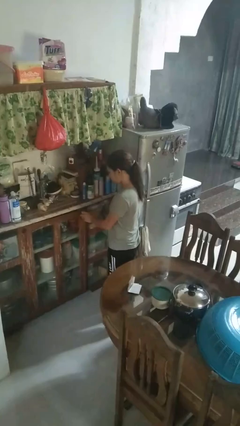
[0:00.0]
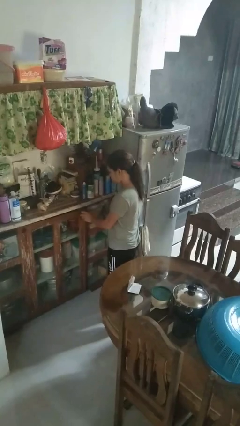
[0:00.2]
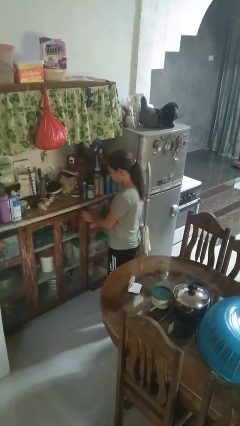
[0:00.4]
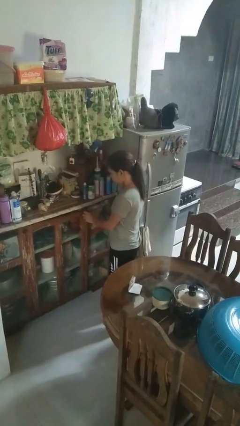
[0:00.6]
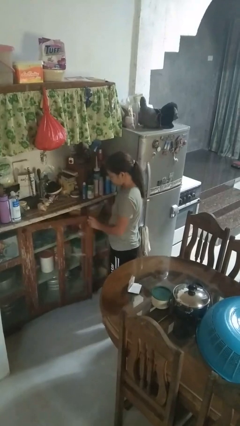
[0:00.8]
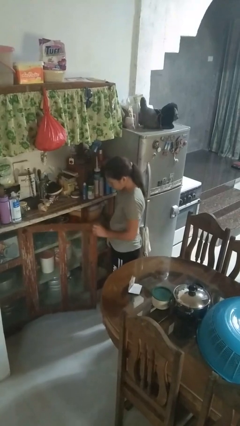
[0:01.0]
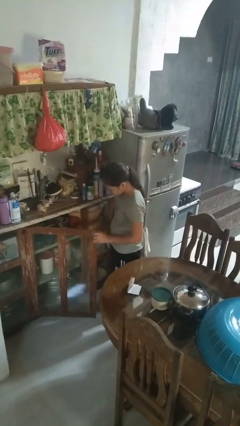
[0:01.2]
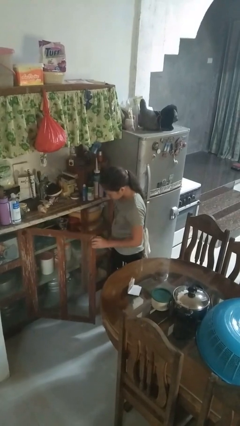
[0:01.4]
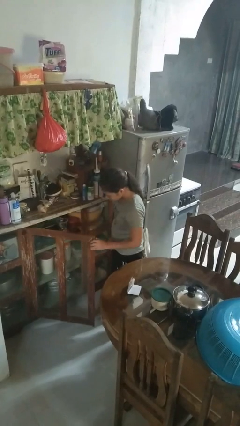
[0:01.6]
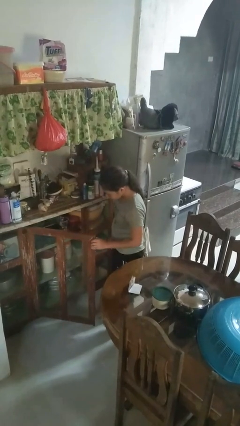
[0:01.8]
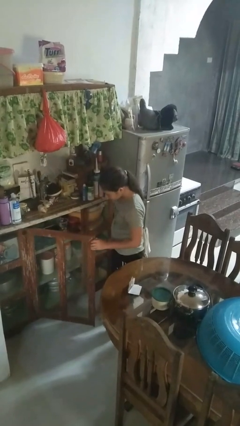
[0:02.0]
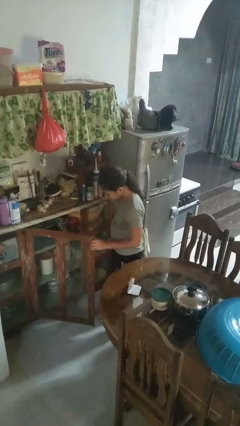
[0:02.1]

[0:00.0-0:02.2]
person opens cabinet

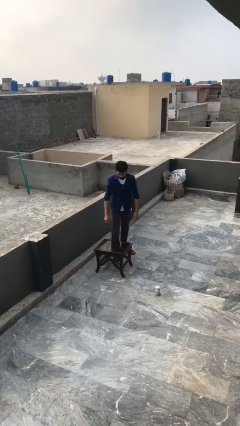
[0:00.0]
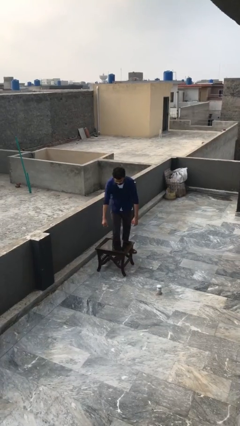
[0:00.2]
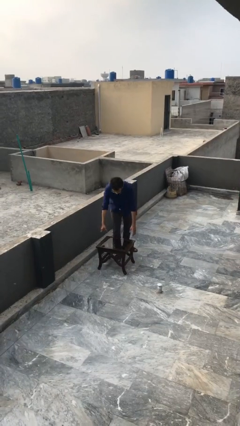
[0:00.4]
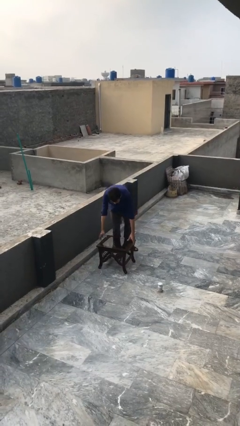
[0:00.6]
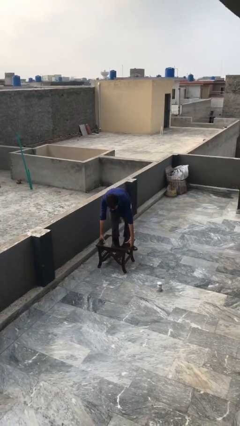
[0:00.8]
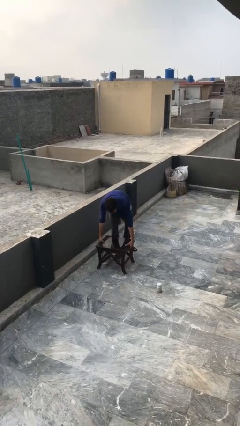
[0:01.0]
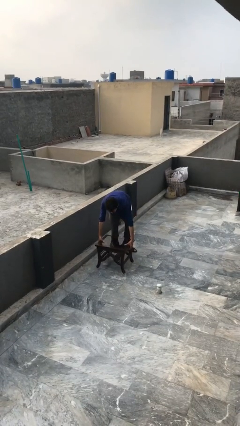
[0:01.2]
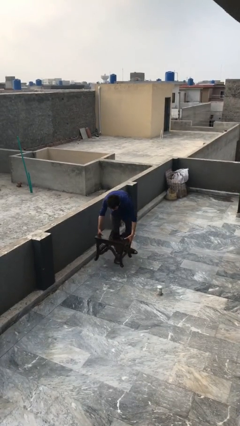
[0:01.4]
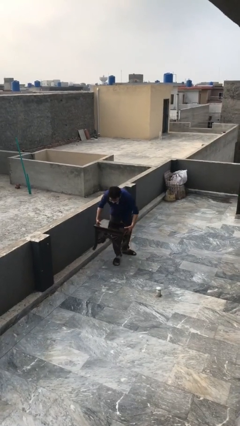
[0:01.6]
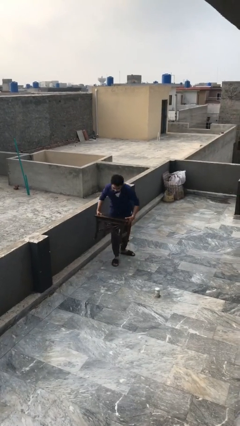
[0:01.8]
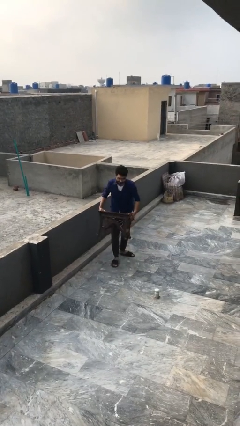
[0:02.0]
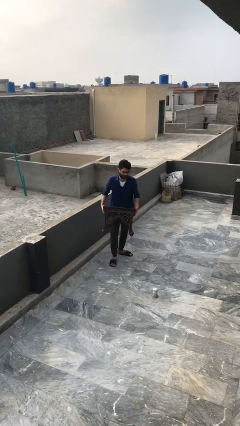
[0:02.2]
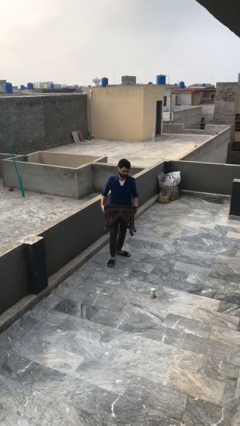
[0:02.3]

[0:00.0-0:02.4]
person picks up object from floor

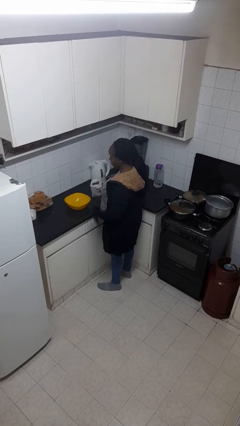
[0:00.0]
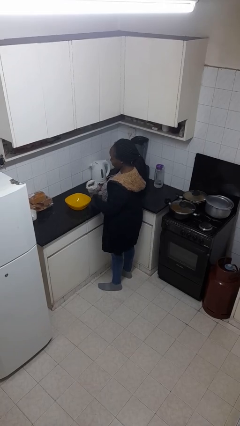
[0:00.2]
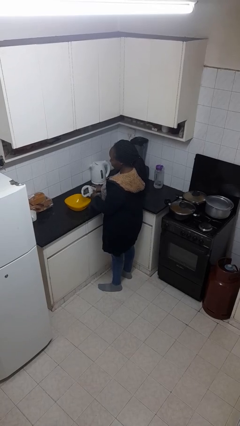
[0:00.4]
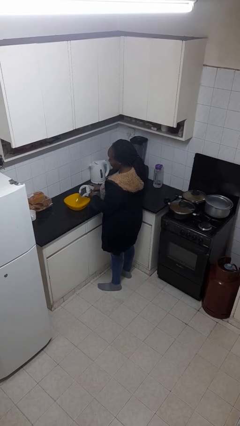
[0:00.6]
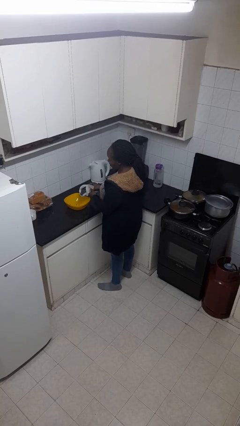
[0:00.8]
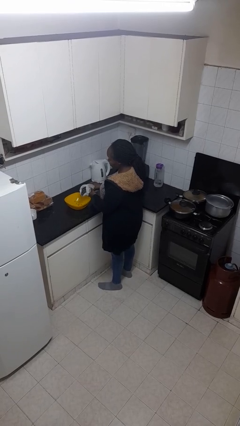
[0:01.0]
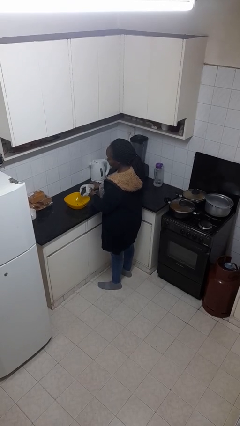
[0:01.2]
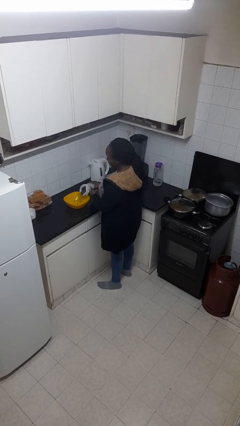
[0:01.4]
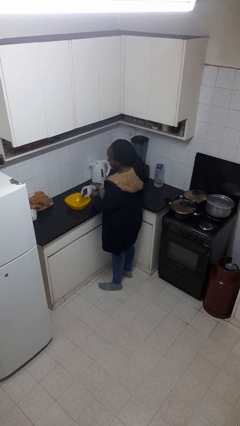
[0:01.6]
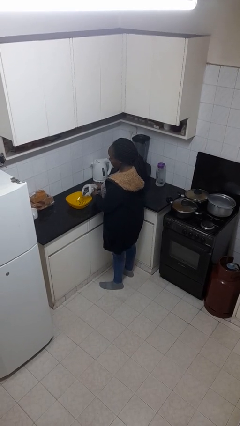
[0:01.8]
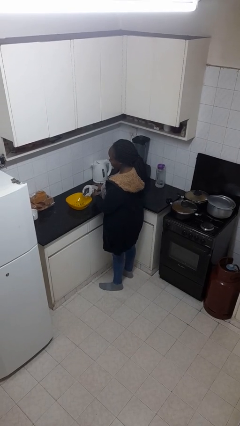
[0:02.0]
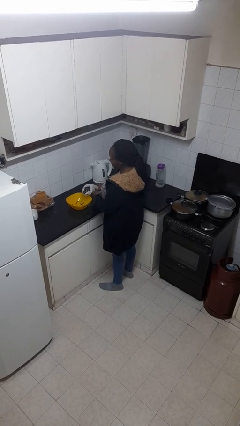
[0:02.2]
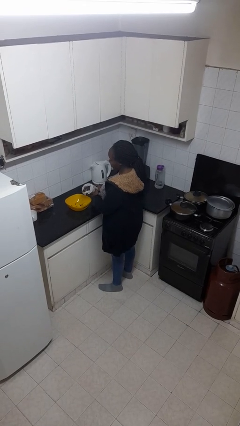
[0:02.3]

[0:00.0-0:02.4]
person pours into bowl

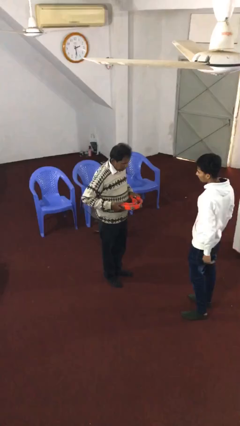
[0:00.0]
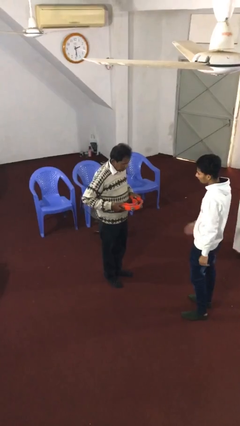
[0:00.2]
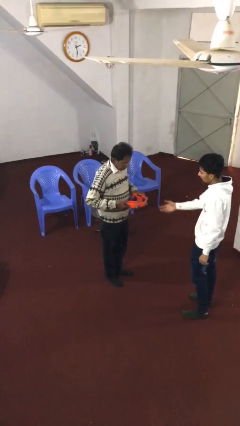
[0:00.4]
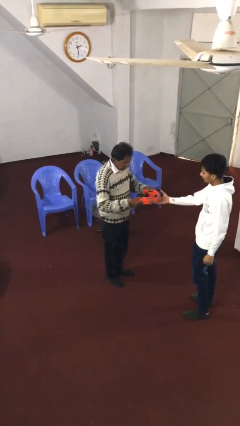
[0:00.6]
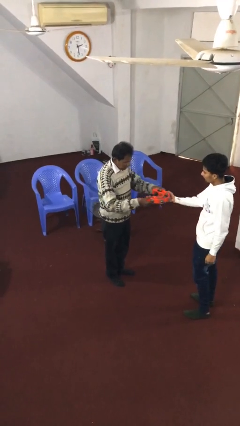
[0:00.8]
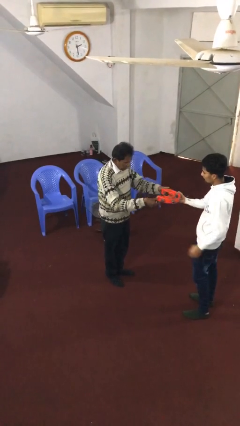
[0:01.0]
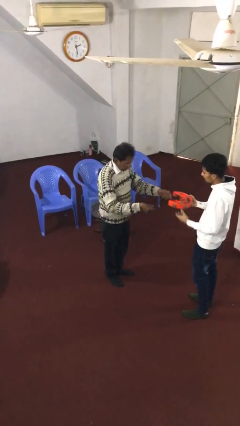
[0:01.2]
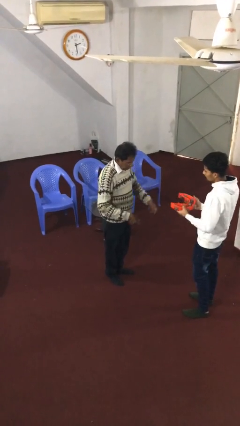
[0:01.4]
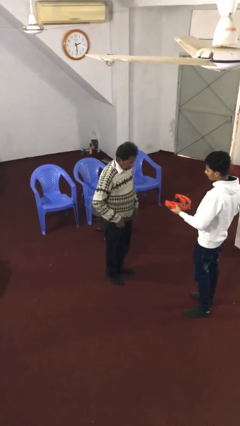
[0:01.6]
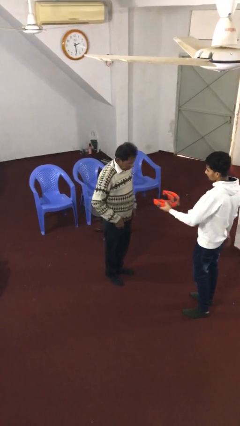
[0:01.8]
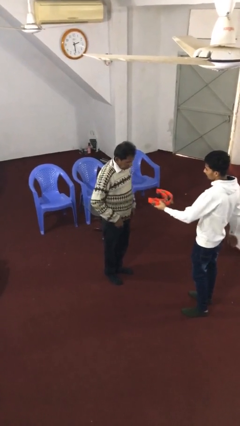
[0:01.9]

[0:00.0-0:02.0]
person transfers object to person

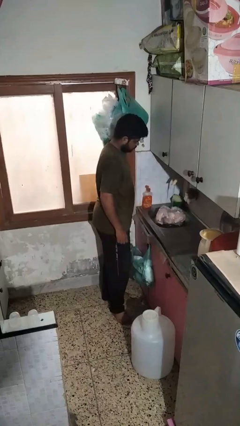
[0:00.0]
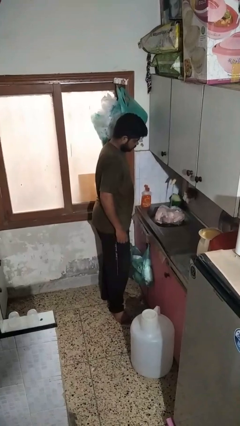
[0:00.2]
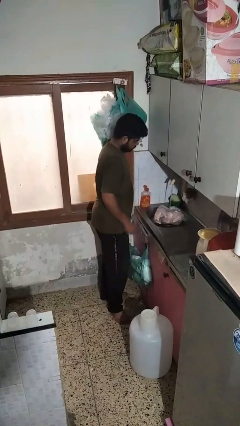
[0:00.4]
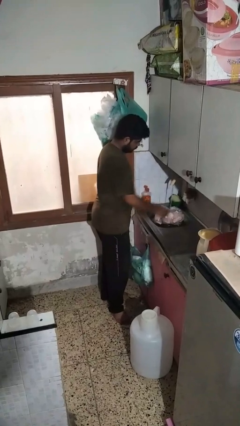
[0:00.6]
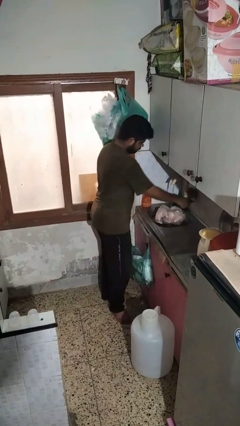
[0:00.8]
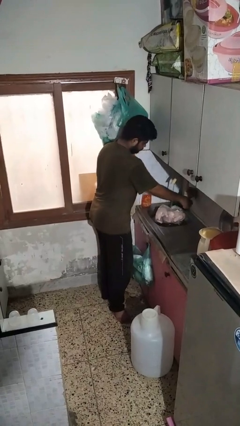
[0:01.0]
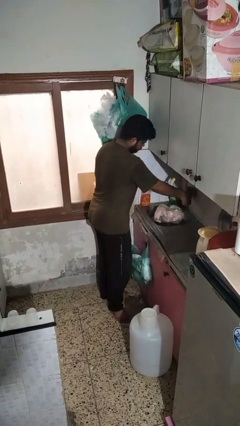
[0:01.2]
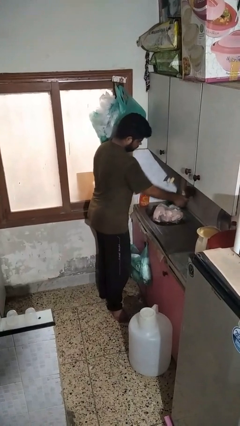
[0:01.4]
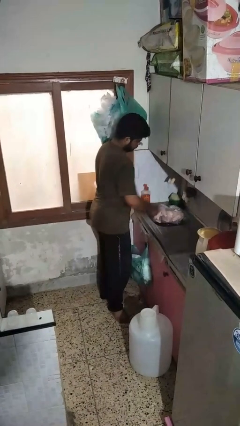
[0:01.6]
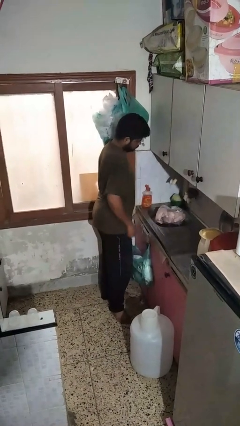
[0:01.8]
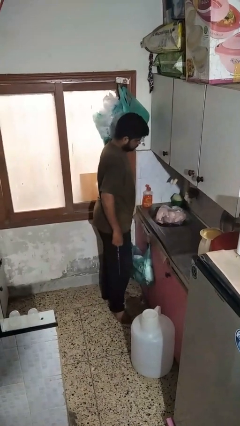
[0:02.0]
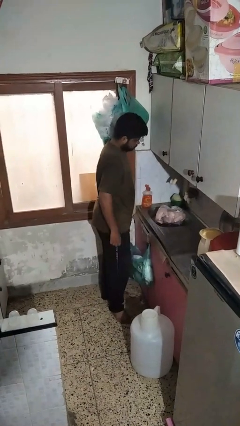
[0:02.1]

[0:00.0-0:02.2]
person turns off faucet

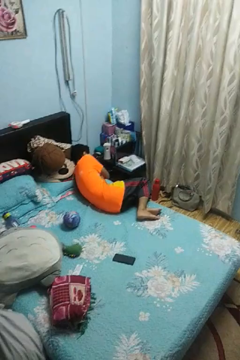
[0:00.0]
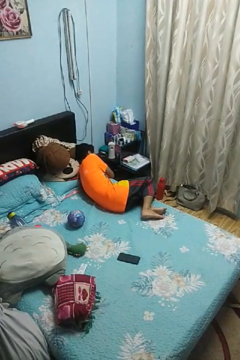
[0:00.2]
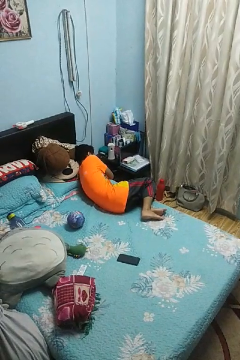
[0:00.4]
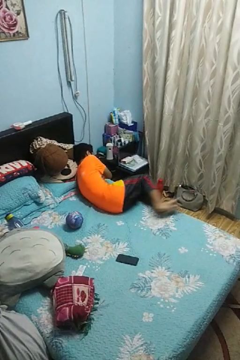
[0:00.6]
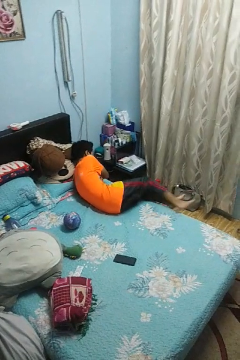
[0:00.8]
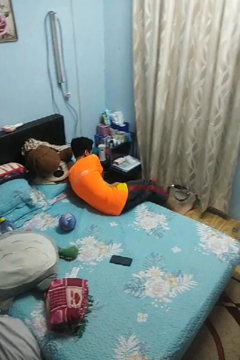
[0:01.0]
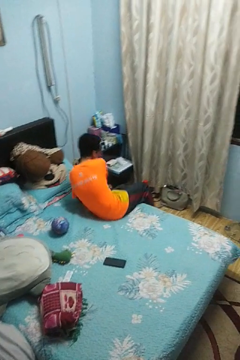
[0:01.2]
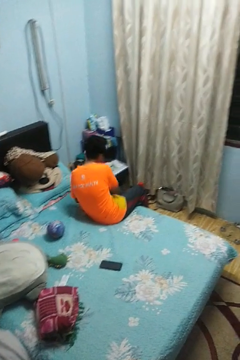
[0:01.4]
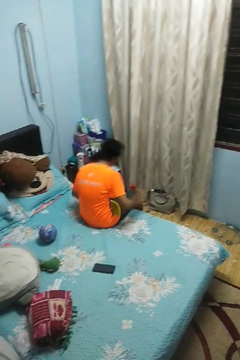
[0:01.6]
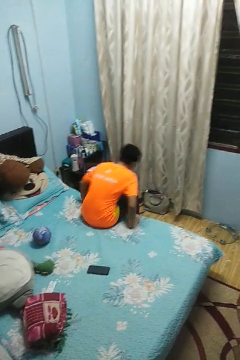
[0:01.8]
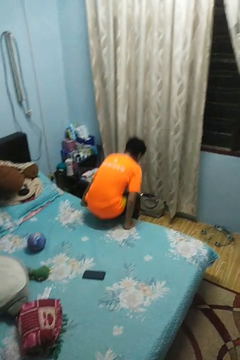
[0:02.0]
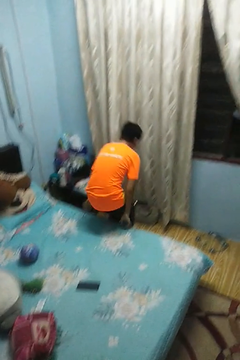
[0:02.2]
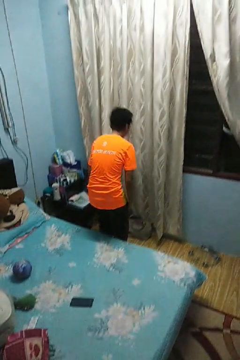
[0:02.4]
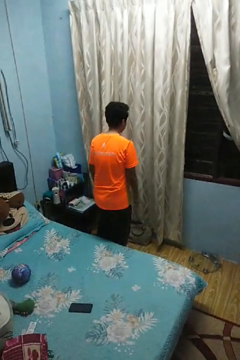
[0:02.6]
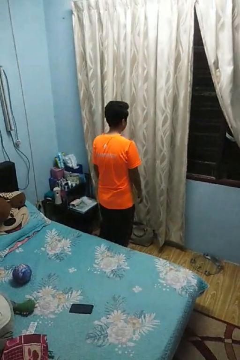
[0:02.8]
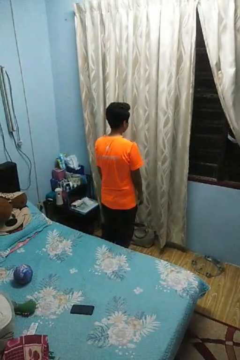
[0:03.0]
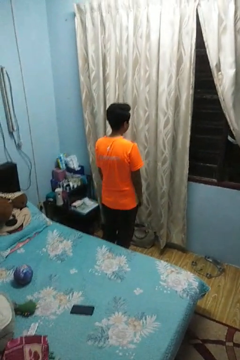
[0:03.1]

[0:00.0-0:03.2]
person stands up

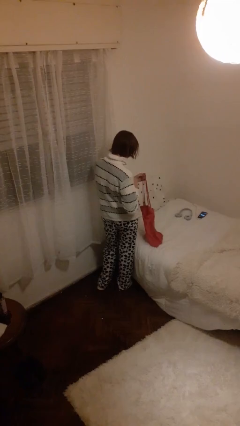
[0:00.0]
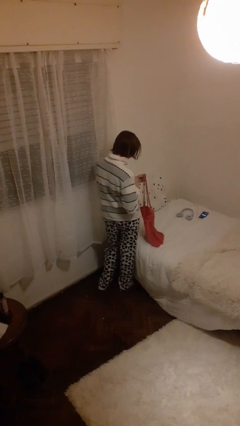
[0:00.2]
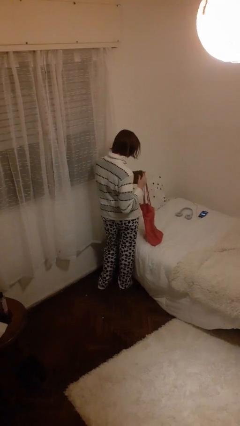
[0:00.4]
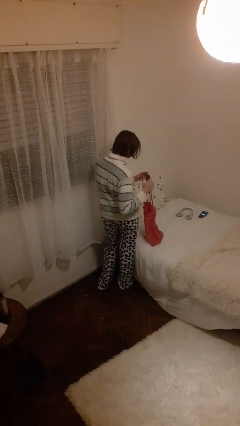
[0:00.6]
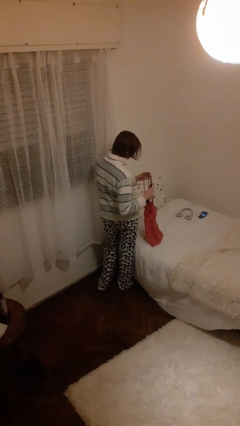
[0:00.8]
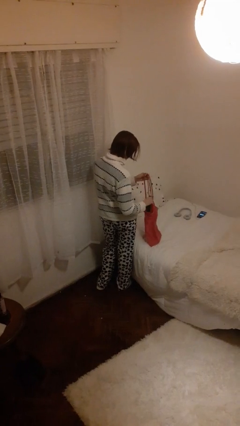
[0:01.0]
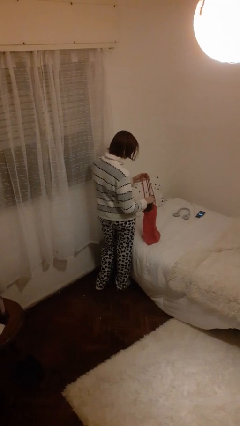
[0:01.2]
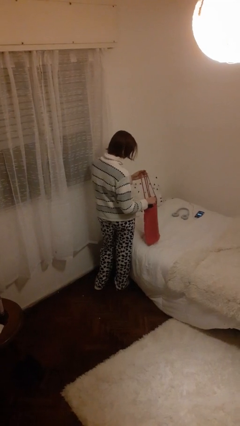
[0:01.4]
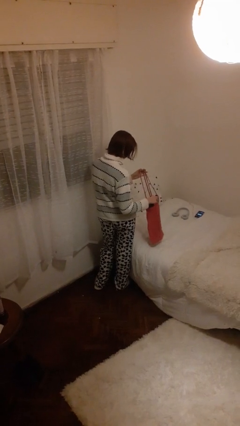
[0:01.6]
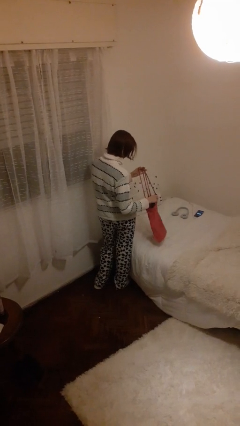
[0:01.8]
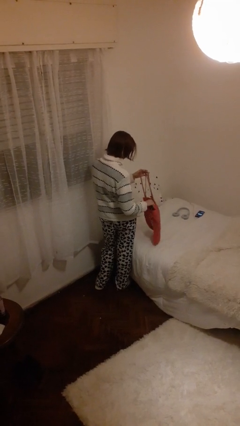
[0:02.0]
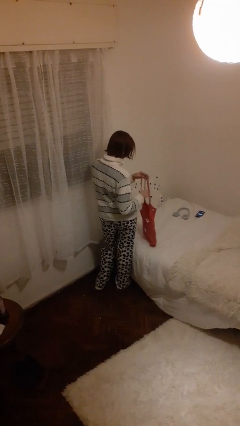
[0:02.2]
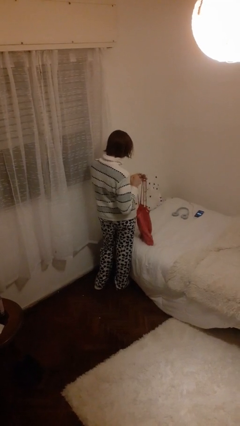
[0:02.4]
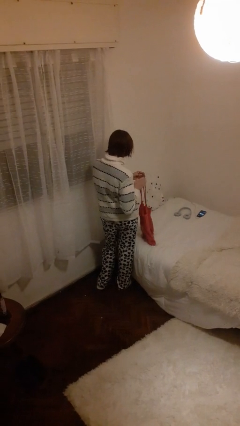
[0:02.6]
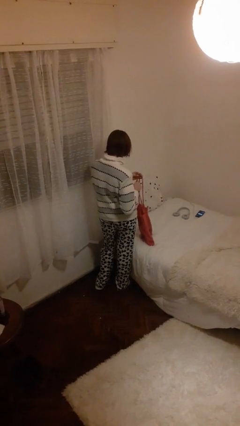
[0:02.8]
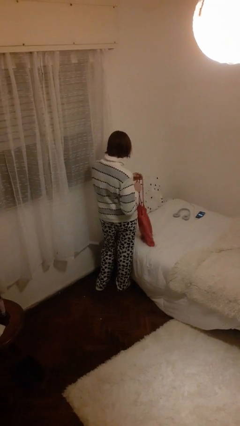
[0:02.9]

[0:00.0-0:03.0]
person puts object into bag
